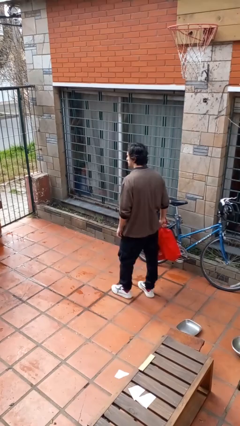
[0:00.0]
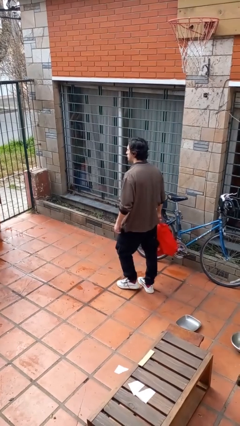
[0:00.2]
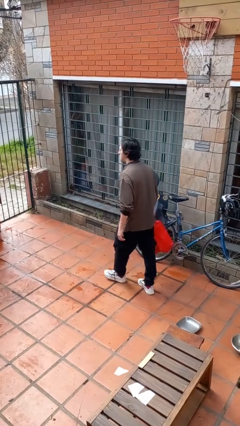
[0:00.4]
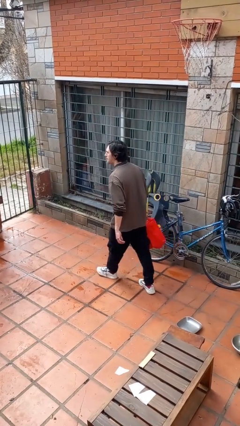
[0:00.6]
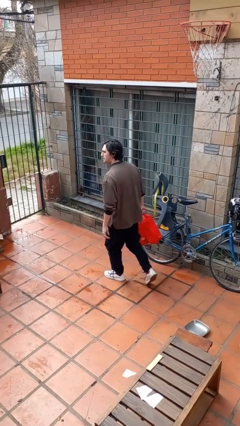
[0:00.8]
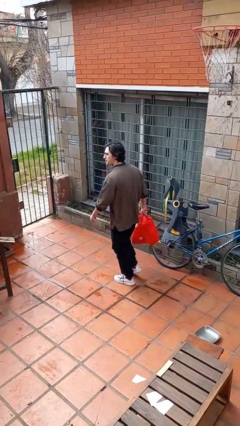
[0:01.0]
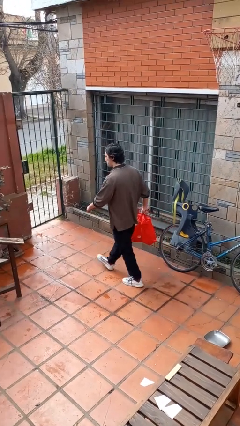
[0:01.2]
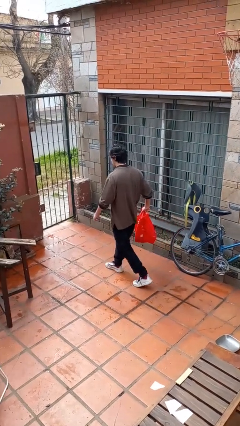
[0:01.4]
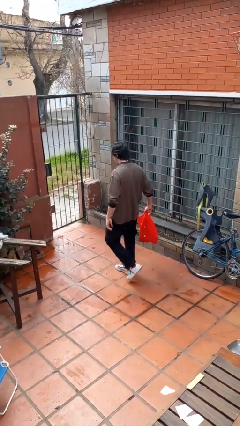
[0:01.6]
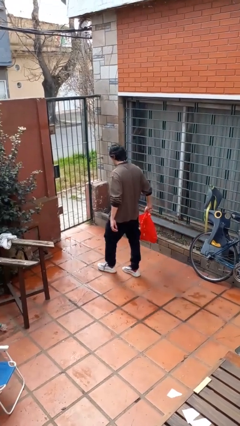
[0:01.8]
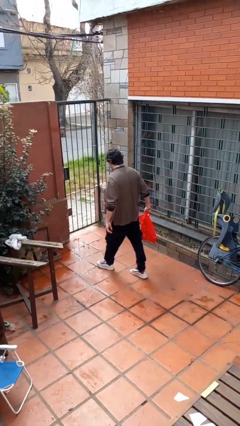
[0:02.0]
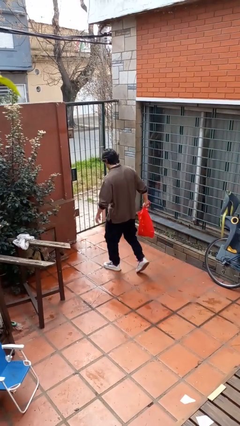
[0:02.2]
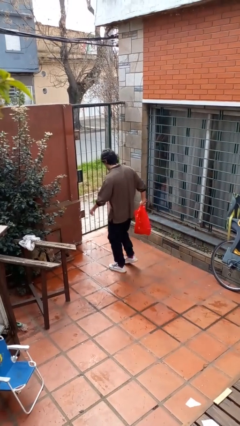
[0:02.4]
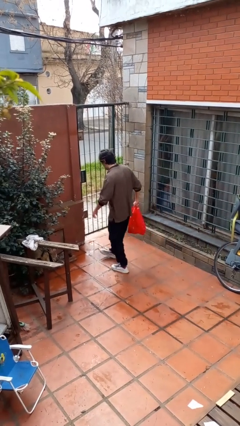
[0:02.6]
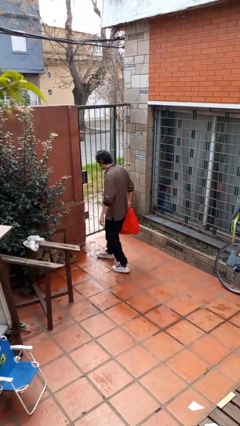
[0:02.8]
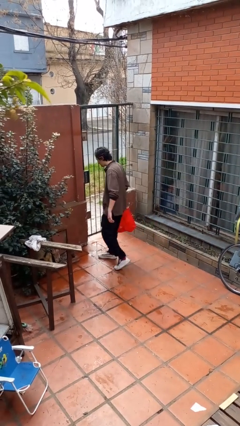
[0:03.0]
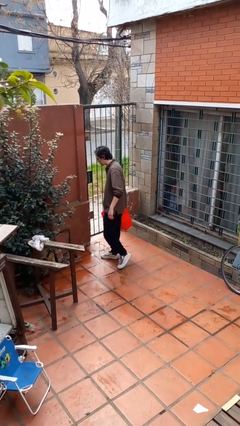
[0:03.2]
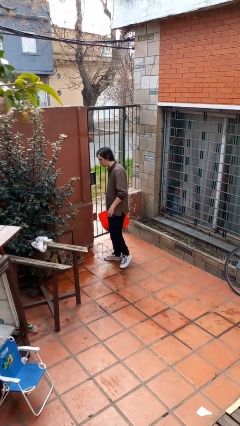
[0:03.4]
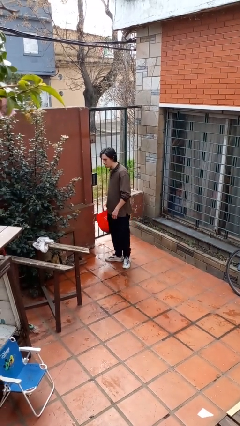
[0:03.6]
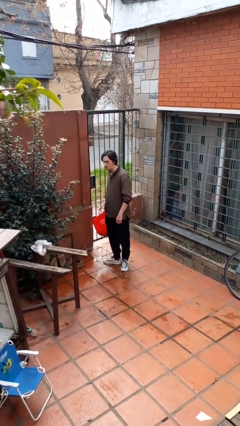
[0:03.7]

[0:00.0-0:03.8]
person carries groceries

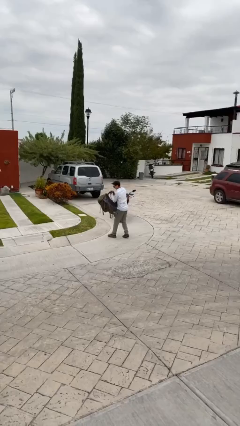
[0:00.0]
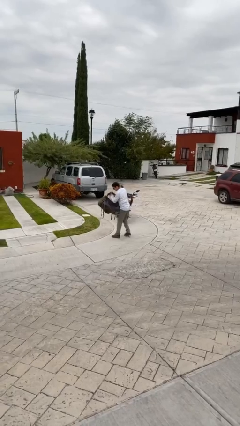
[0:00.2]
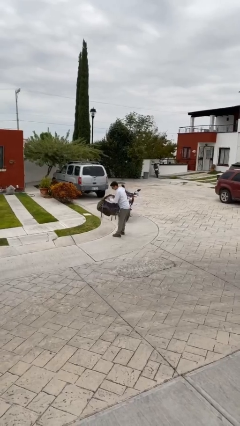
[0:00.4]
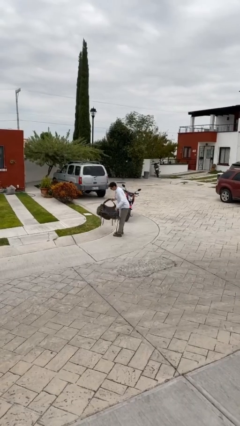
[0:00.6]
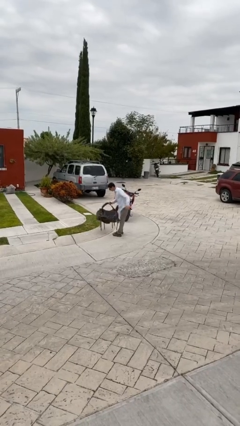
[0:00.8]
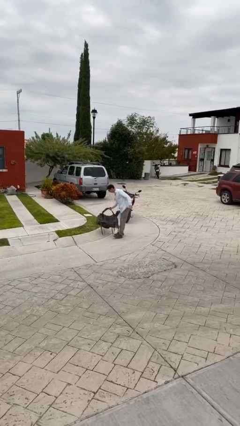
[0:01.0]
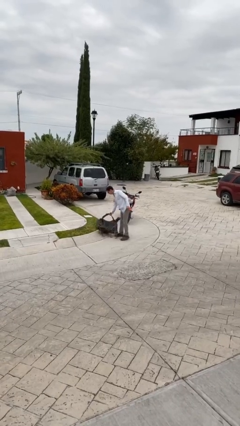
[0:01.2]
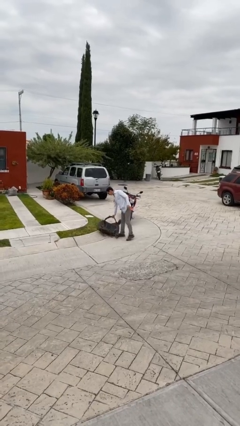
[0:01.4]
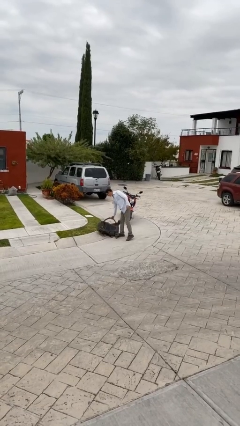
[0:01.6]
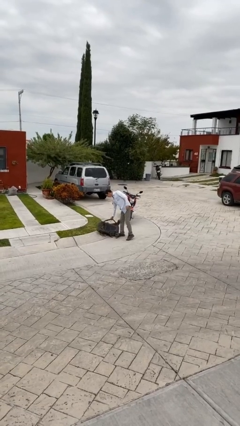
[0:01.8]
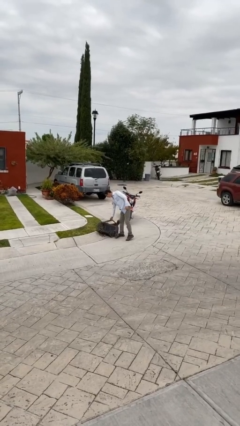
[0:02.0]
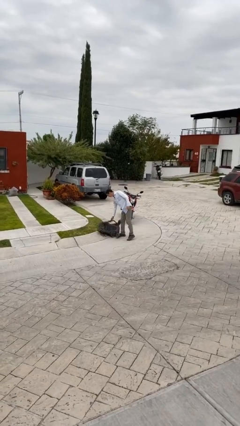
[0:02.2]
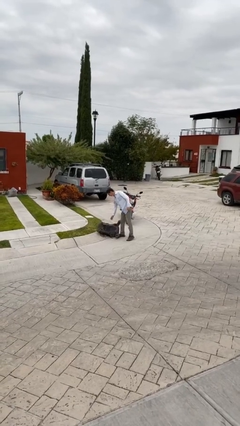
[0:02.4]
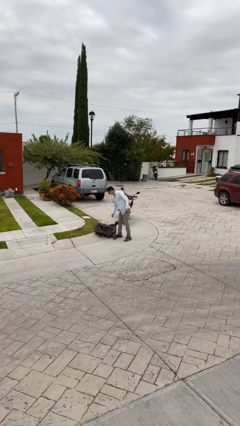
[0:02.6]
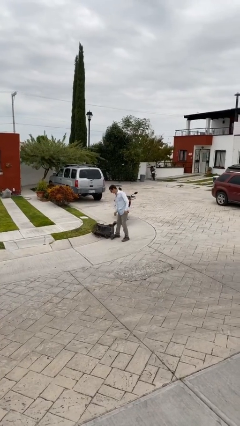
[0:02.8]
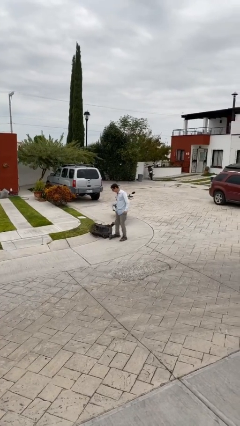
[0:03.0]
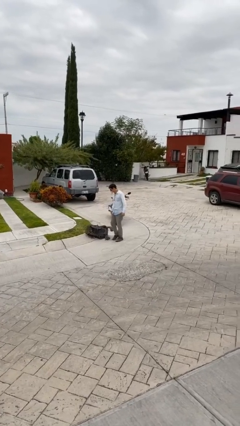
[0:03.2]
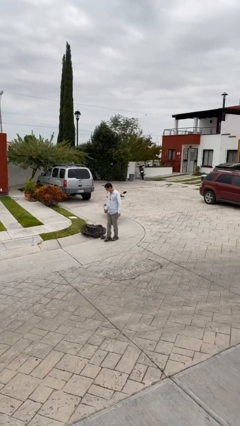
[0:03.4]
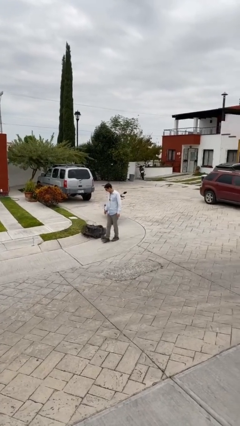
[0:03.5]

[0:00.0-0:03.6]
person puts down object on floor

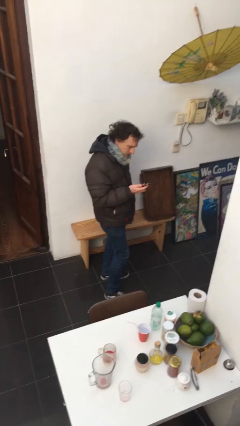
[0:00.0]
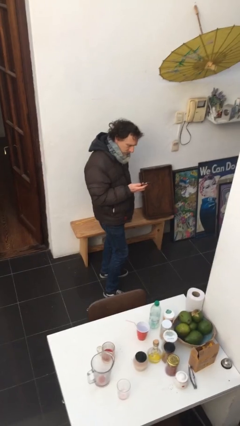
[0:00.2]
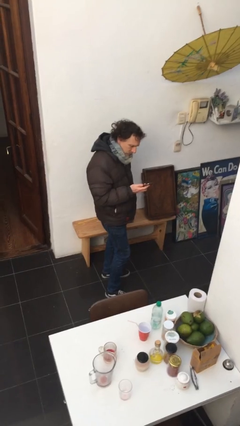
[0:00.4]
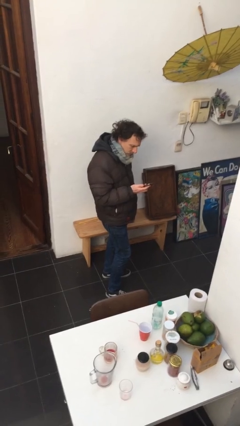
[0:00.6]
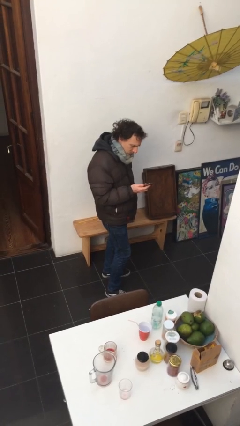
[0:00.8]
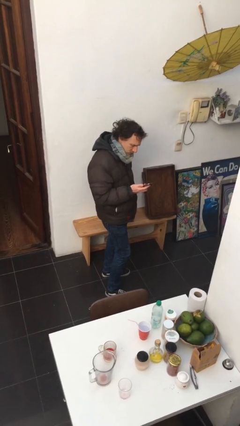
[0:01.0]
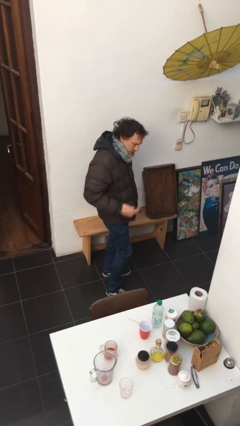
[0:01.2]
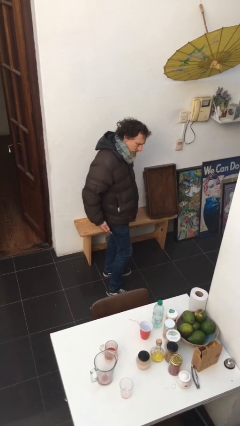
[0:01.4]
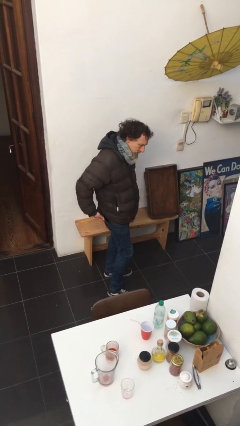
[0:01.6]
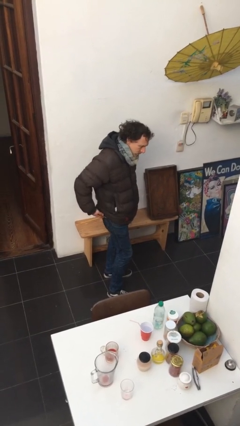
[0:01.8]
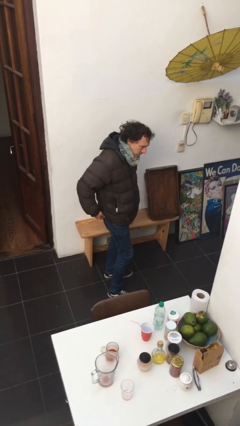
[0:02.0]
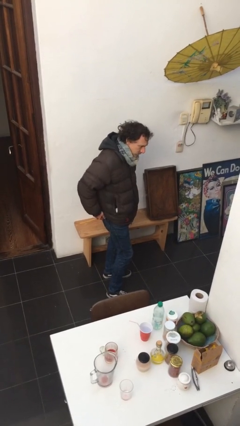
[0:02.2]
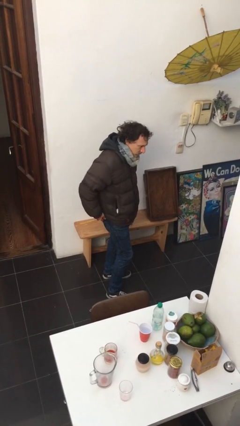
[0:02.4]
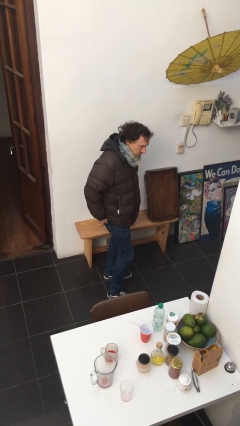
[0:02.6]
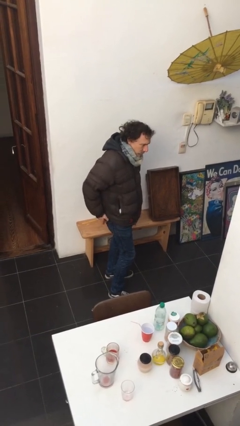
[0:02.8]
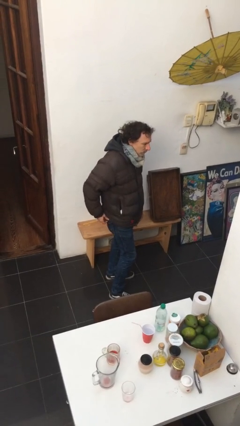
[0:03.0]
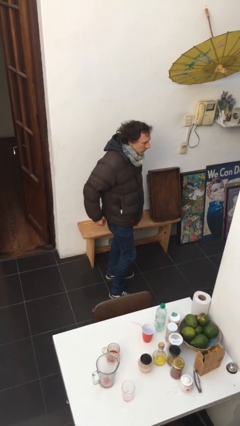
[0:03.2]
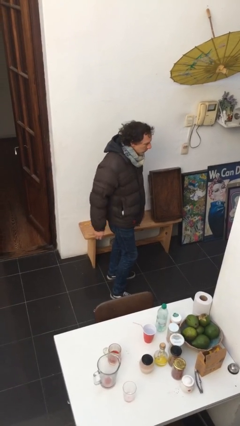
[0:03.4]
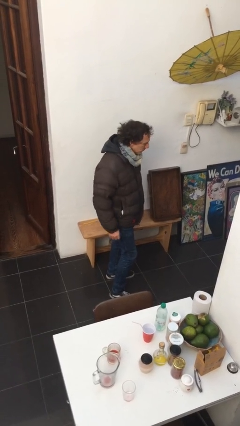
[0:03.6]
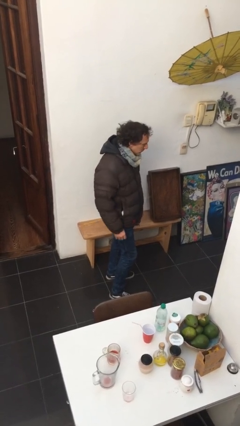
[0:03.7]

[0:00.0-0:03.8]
person puts phone into pocket

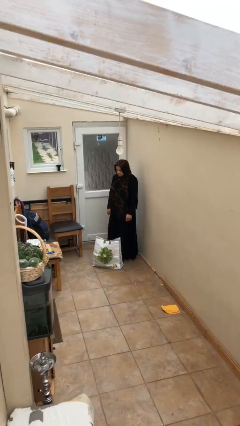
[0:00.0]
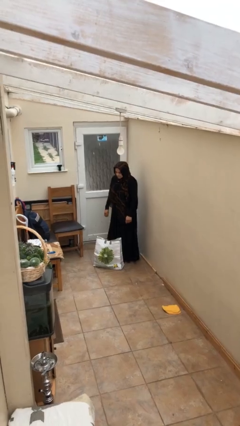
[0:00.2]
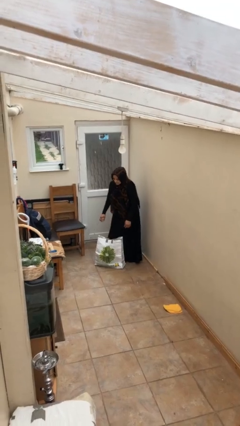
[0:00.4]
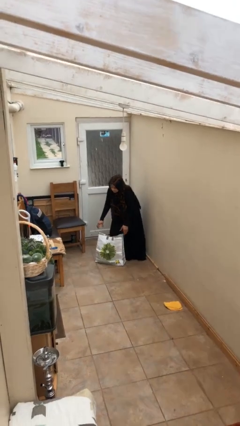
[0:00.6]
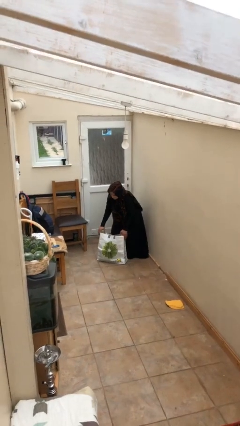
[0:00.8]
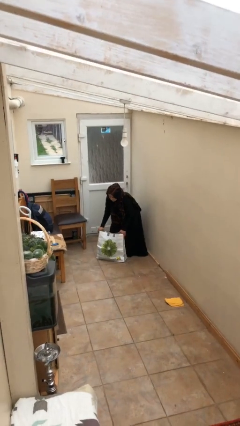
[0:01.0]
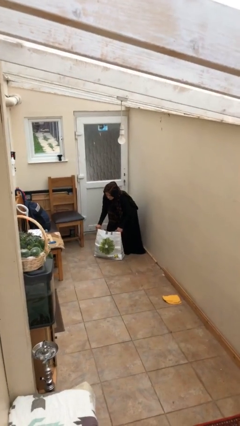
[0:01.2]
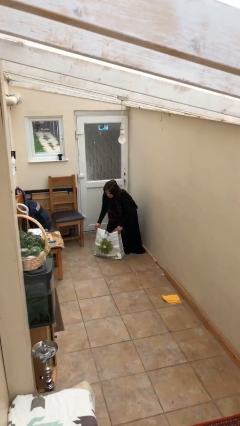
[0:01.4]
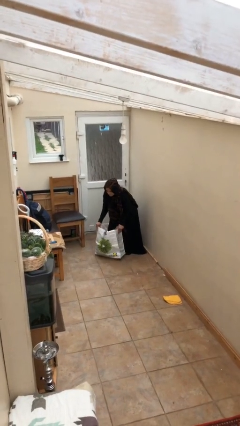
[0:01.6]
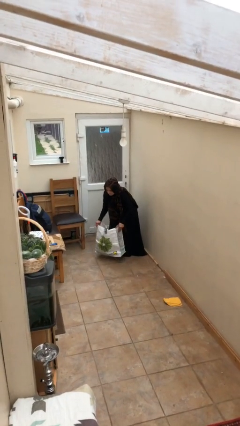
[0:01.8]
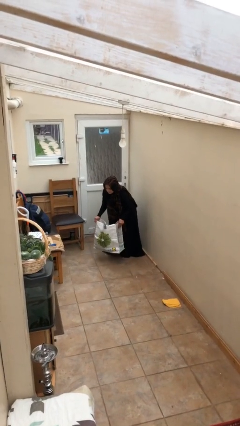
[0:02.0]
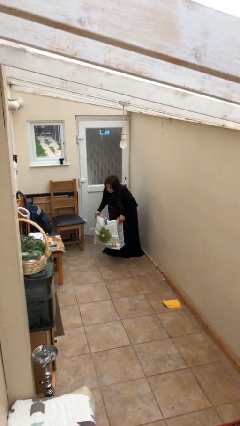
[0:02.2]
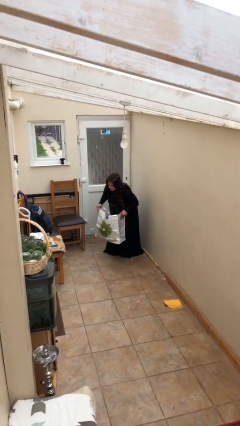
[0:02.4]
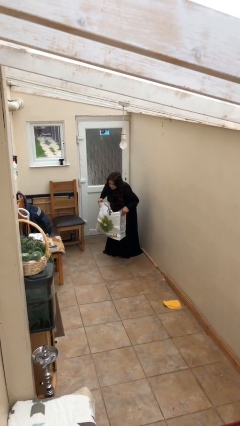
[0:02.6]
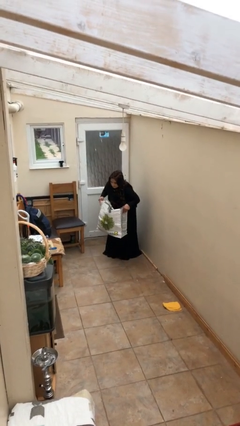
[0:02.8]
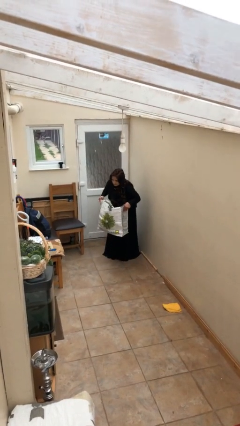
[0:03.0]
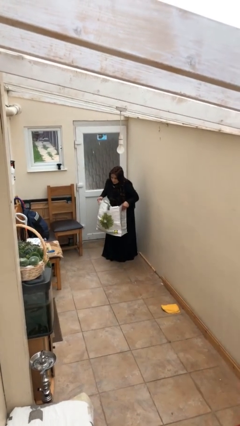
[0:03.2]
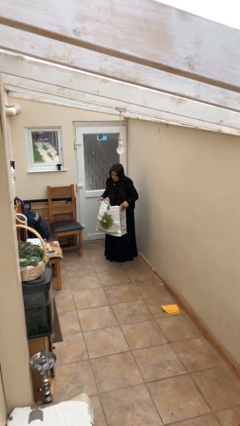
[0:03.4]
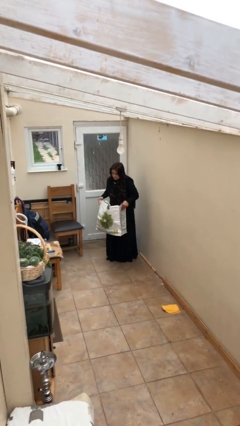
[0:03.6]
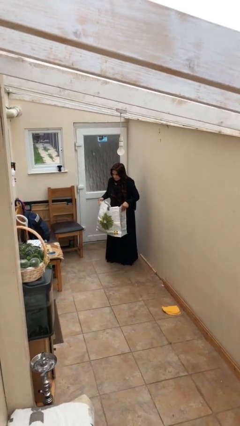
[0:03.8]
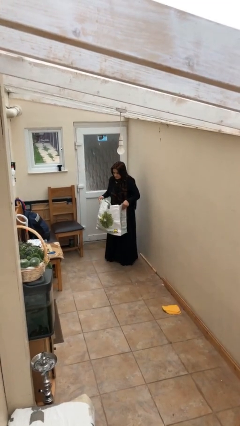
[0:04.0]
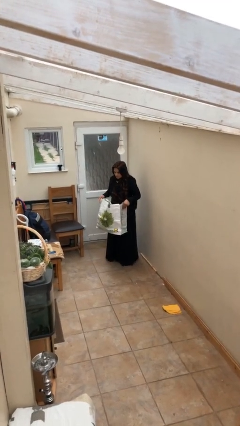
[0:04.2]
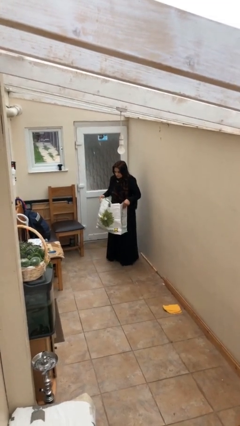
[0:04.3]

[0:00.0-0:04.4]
person picks up object from floor

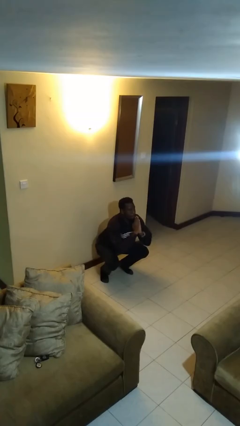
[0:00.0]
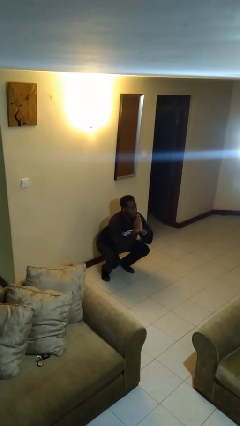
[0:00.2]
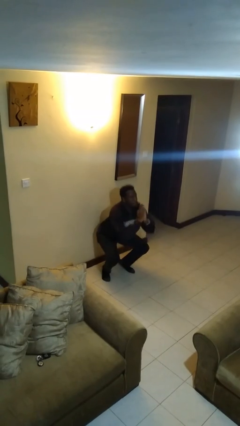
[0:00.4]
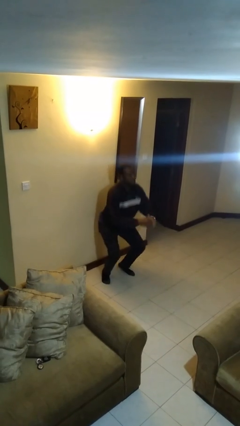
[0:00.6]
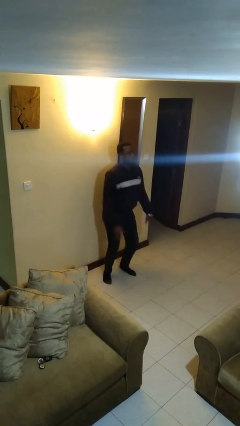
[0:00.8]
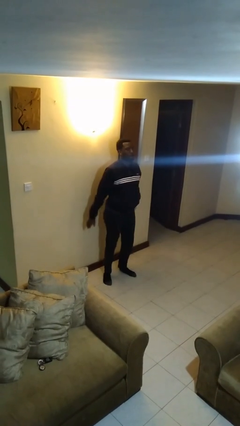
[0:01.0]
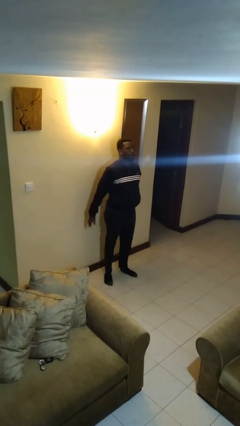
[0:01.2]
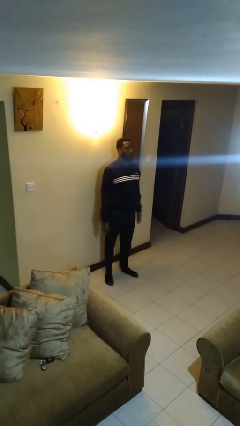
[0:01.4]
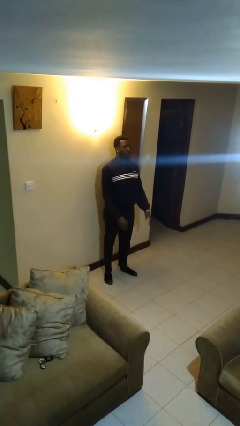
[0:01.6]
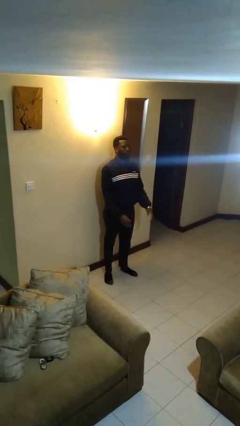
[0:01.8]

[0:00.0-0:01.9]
person stands up

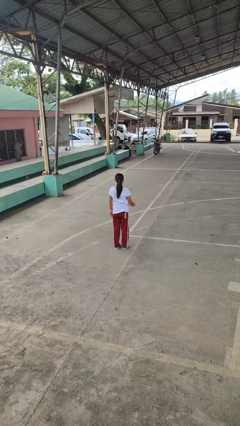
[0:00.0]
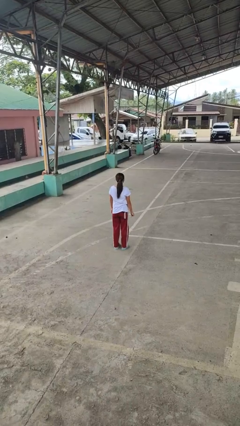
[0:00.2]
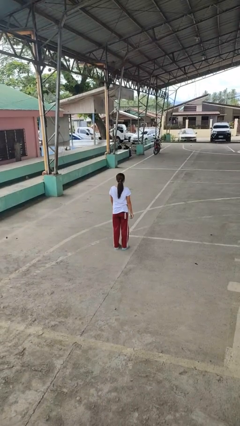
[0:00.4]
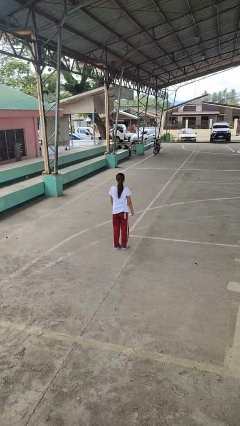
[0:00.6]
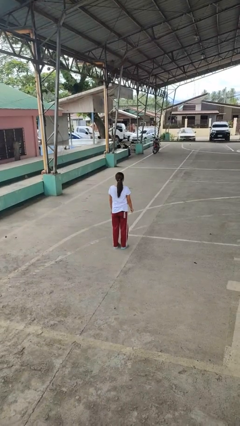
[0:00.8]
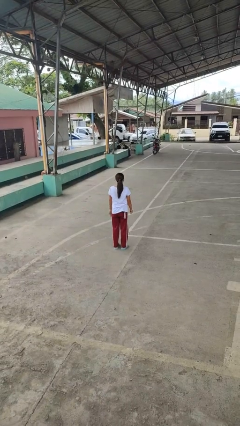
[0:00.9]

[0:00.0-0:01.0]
person gestures lower hand
